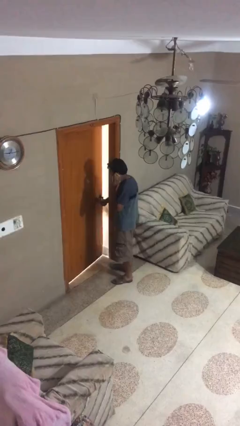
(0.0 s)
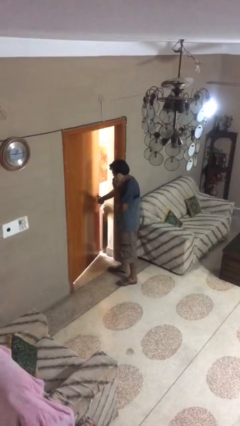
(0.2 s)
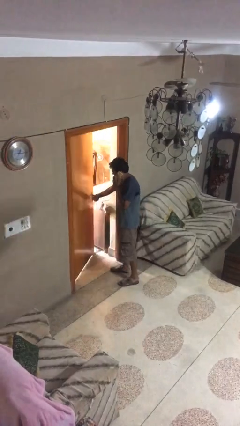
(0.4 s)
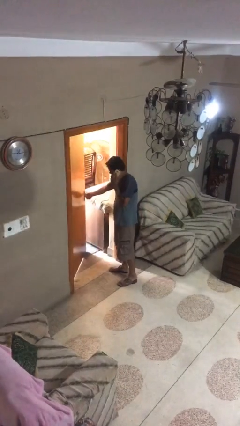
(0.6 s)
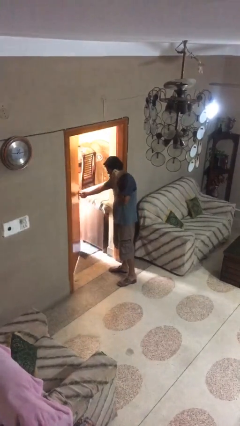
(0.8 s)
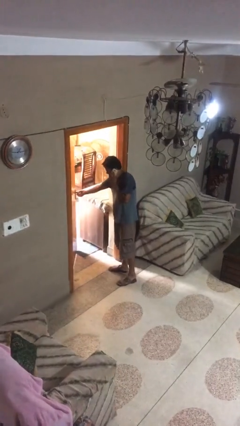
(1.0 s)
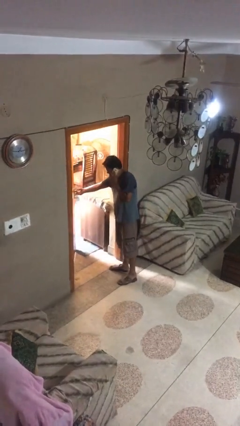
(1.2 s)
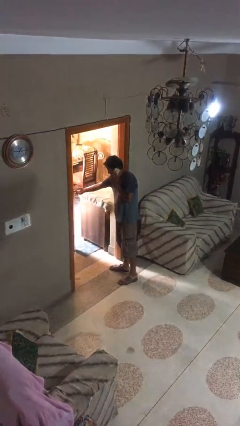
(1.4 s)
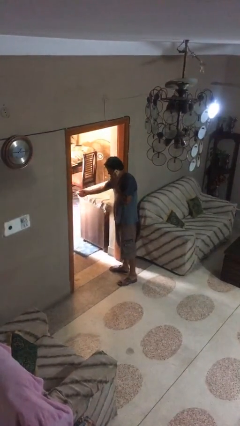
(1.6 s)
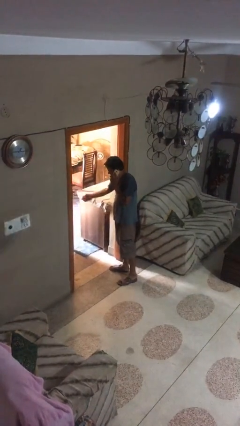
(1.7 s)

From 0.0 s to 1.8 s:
person opens facility door

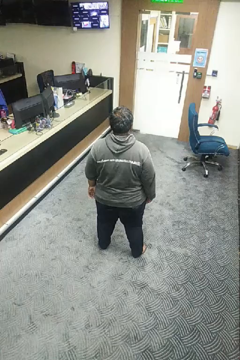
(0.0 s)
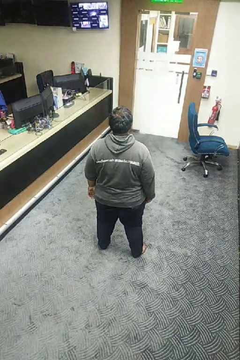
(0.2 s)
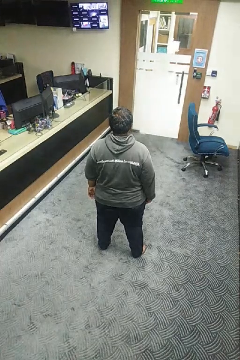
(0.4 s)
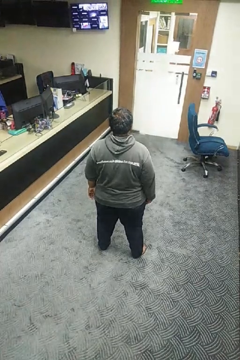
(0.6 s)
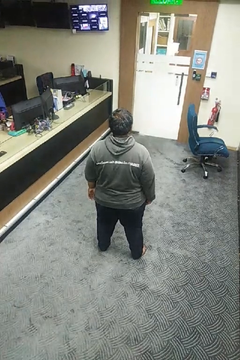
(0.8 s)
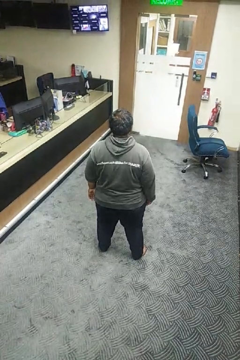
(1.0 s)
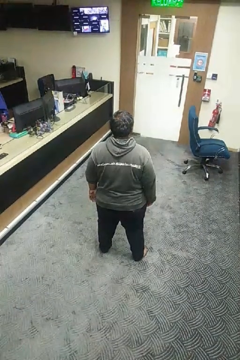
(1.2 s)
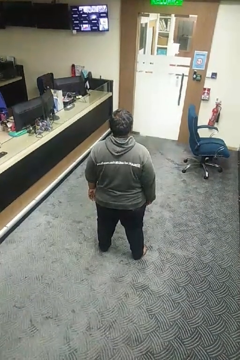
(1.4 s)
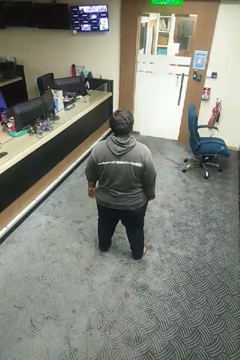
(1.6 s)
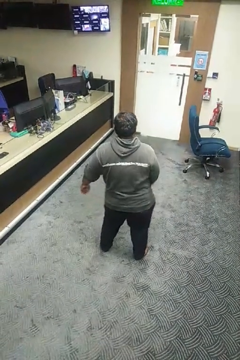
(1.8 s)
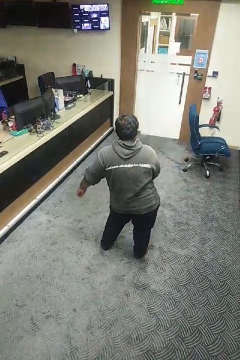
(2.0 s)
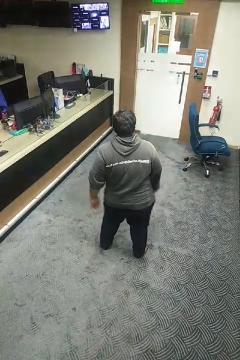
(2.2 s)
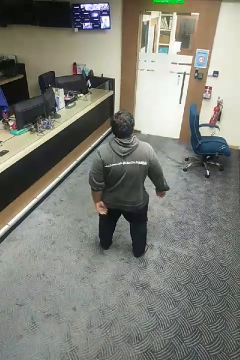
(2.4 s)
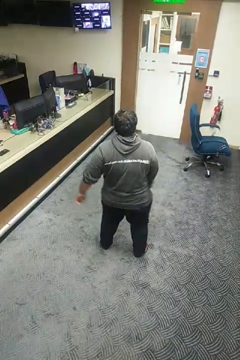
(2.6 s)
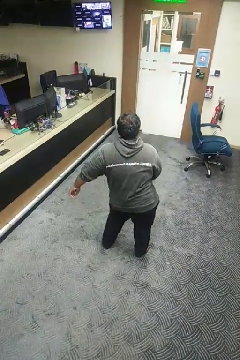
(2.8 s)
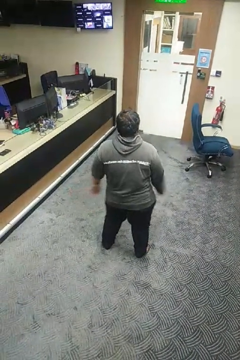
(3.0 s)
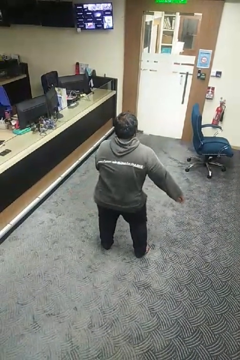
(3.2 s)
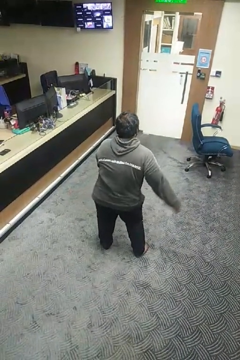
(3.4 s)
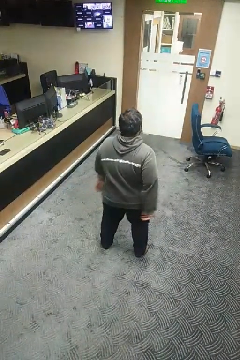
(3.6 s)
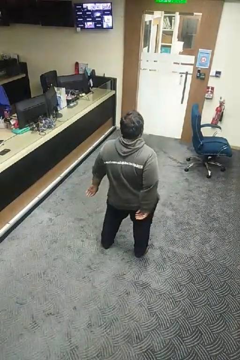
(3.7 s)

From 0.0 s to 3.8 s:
person dances in place

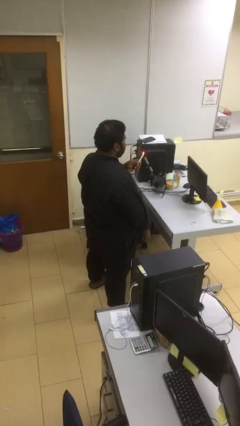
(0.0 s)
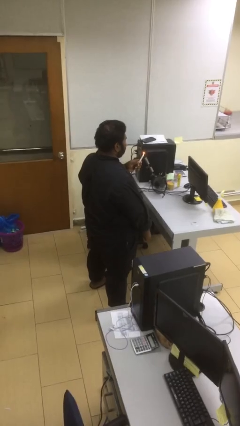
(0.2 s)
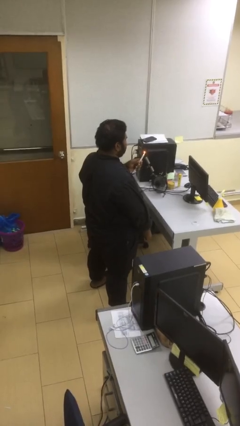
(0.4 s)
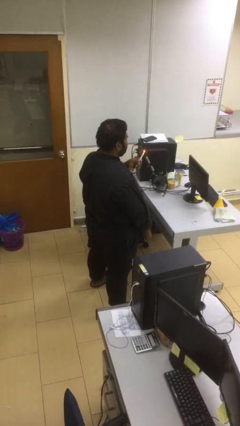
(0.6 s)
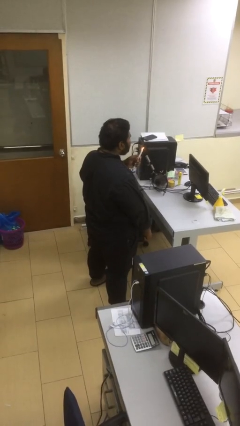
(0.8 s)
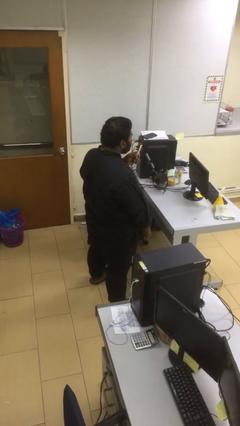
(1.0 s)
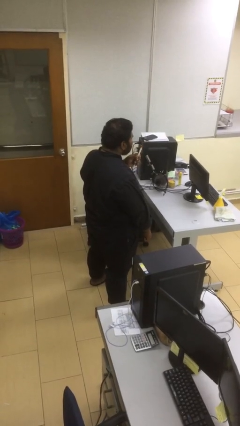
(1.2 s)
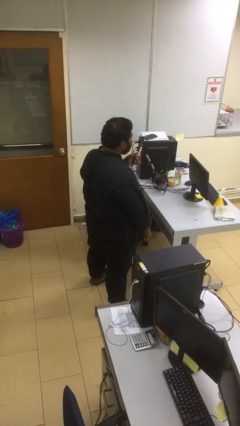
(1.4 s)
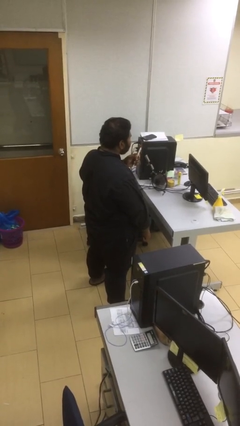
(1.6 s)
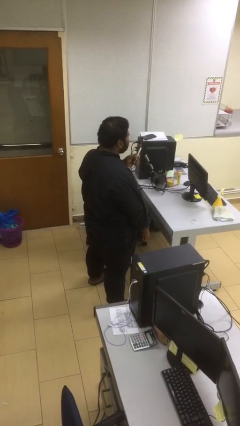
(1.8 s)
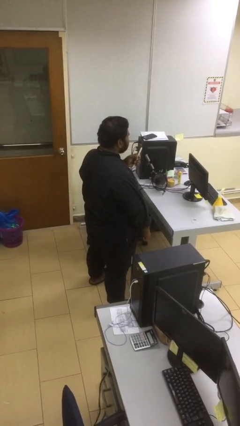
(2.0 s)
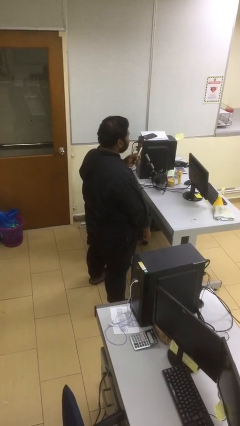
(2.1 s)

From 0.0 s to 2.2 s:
person extinguishes candle

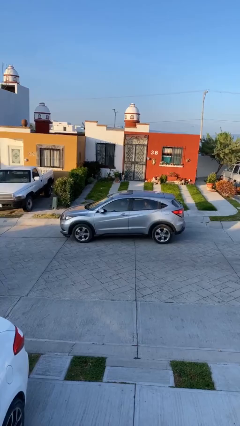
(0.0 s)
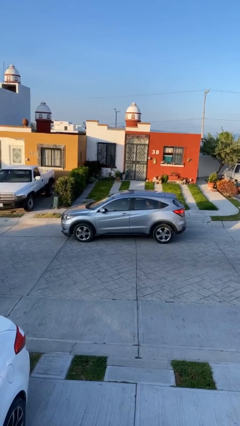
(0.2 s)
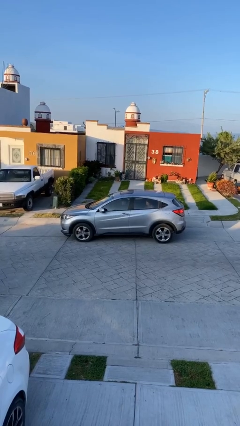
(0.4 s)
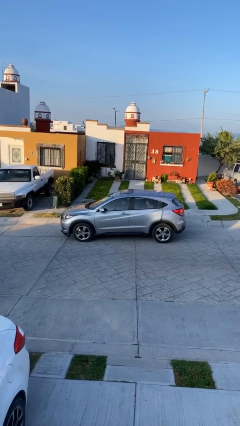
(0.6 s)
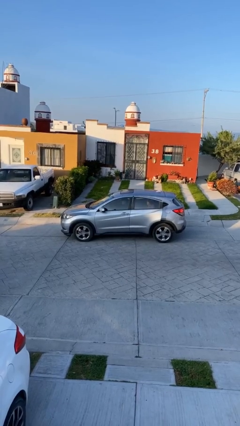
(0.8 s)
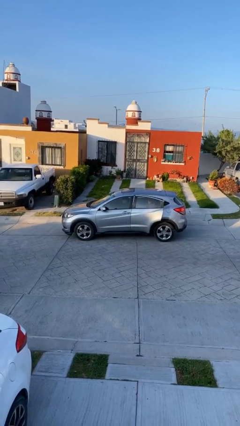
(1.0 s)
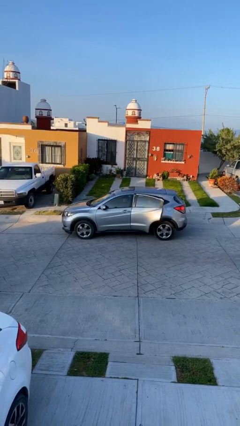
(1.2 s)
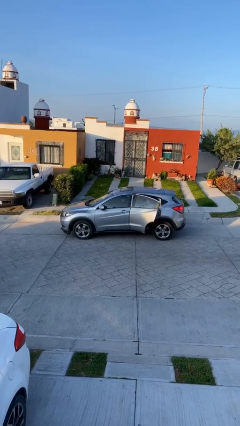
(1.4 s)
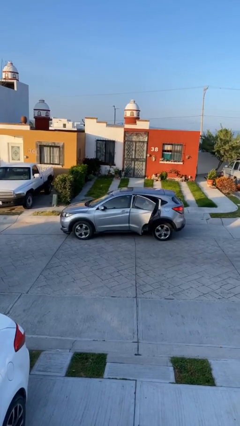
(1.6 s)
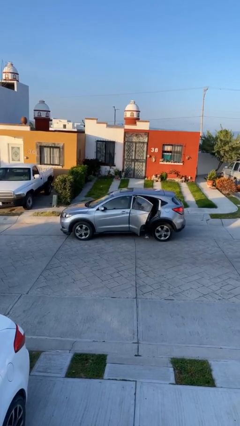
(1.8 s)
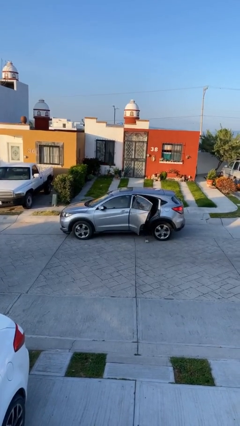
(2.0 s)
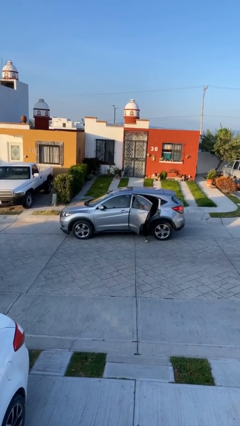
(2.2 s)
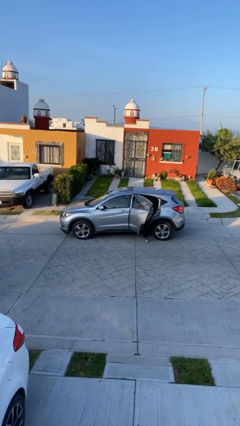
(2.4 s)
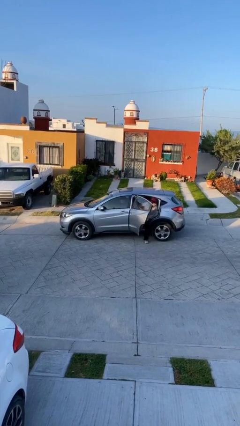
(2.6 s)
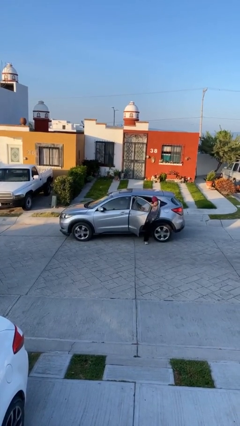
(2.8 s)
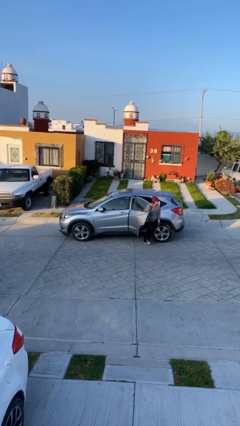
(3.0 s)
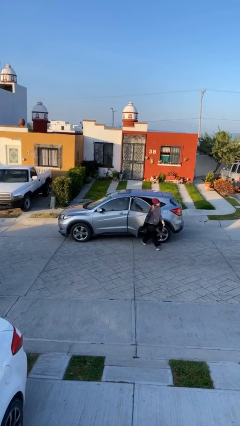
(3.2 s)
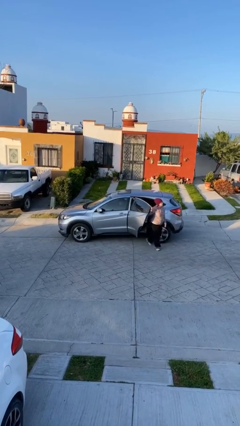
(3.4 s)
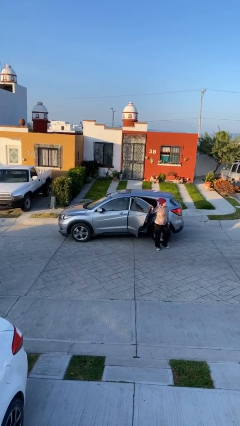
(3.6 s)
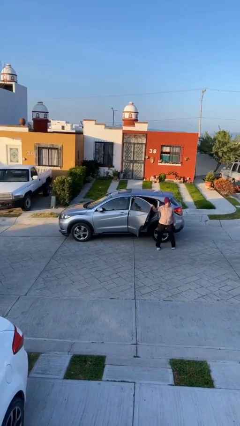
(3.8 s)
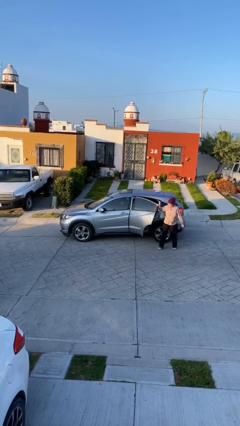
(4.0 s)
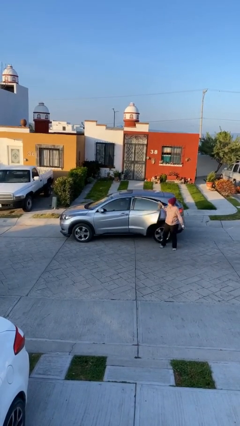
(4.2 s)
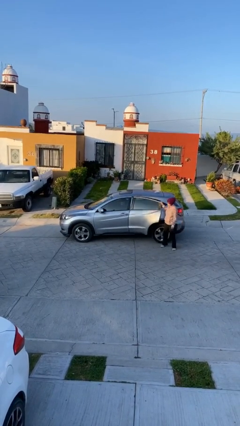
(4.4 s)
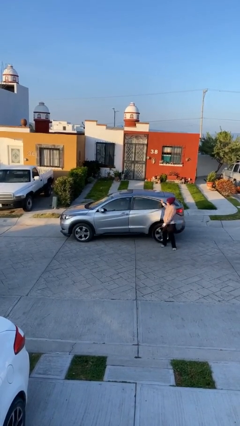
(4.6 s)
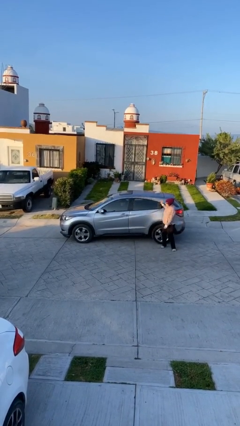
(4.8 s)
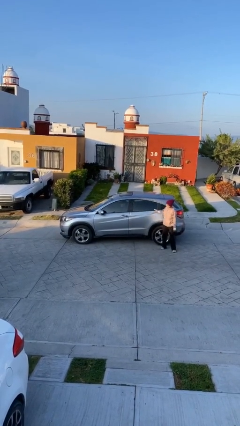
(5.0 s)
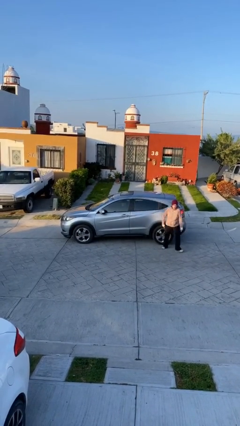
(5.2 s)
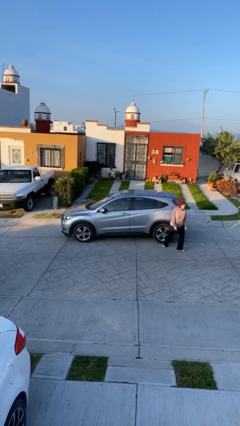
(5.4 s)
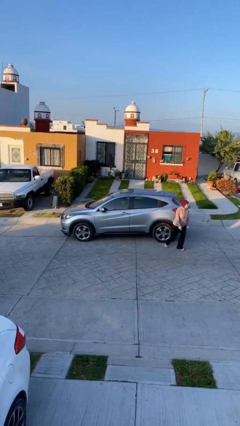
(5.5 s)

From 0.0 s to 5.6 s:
car drops off person

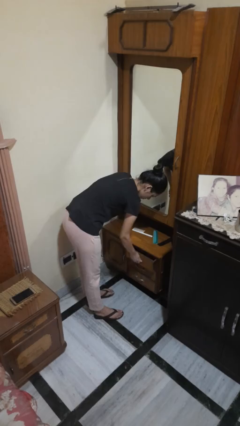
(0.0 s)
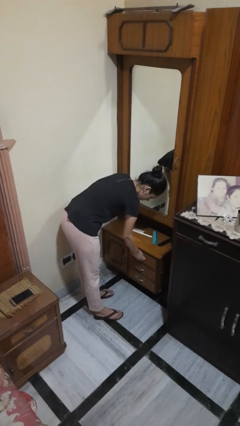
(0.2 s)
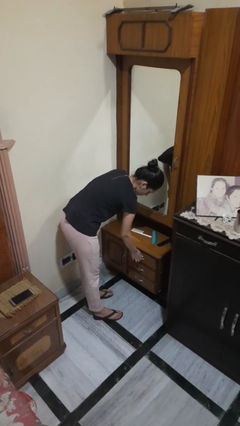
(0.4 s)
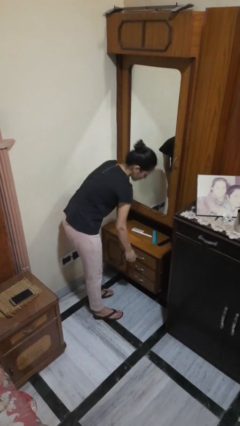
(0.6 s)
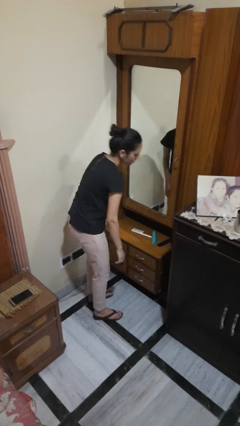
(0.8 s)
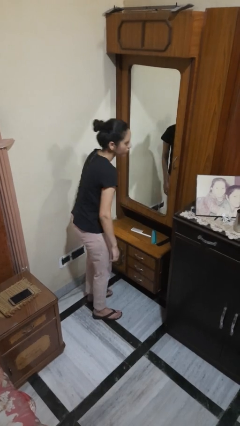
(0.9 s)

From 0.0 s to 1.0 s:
person closes dresser drawer

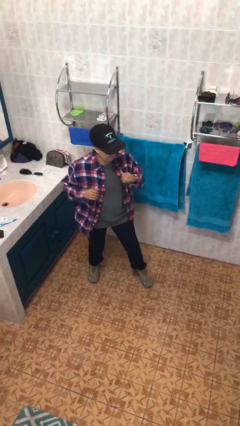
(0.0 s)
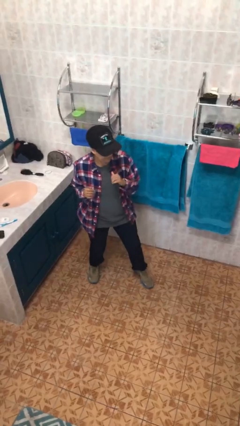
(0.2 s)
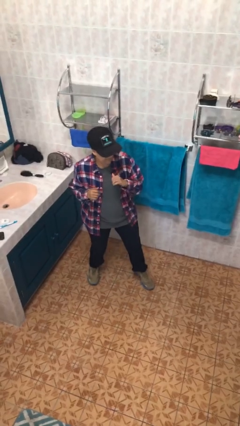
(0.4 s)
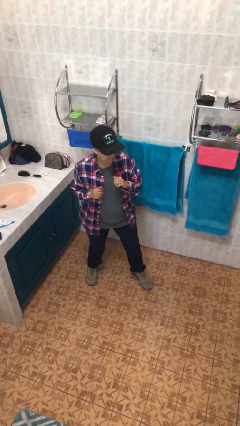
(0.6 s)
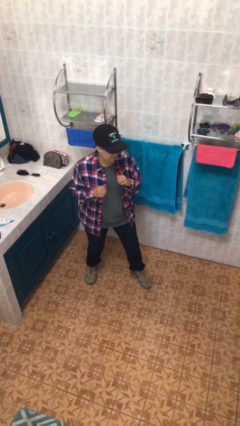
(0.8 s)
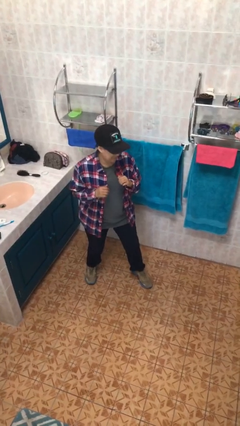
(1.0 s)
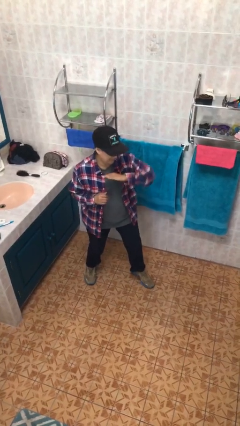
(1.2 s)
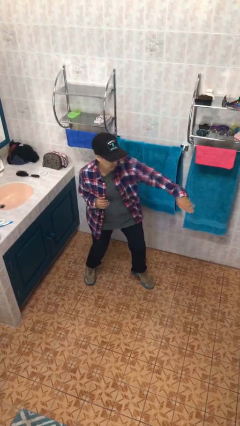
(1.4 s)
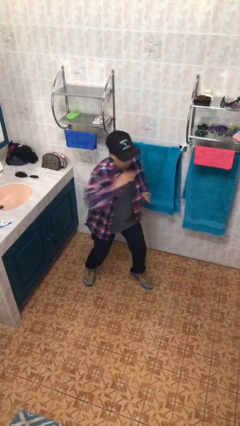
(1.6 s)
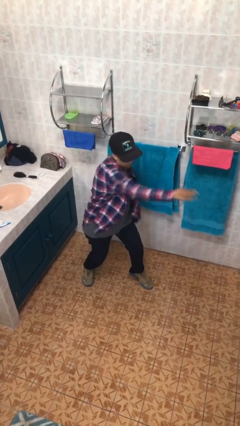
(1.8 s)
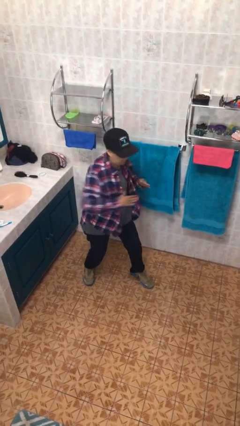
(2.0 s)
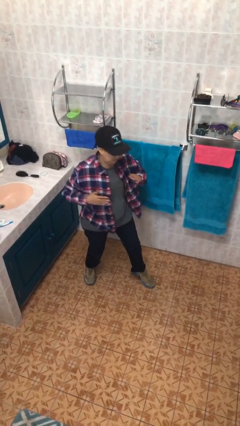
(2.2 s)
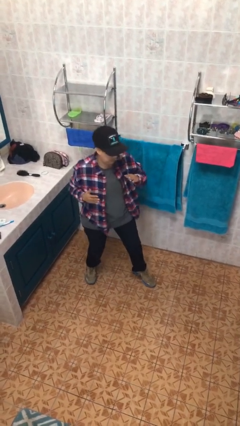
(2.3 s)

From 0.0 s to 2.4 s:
person karate chop

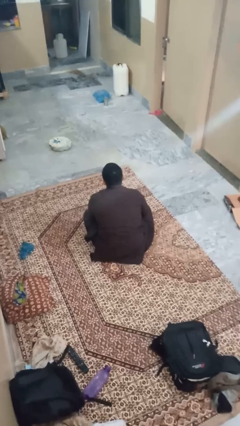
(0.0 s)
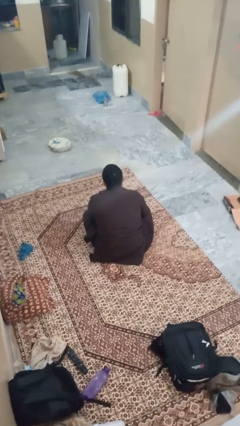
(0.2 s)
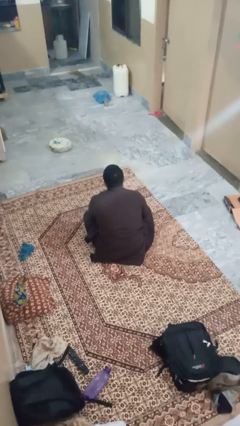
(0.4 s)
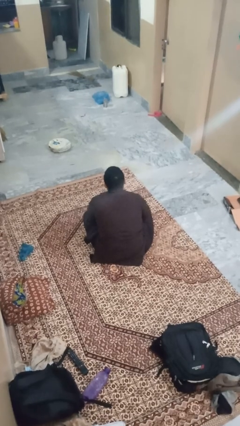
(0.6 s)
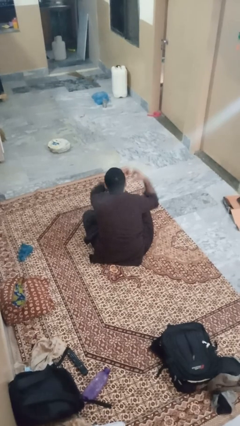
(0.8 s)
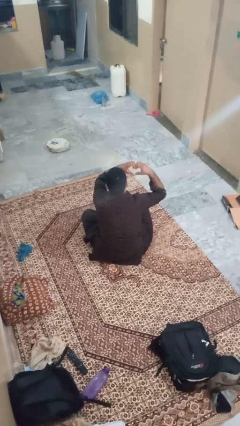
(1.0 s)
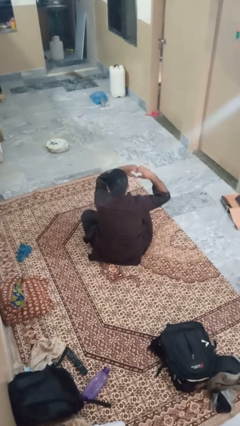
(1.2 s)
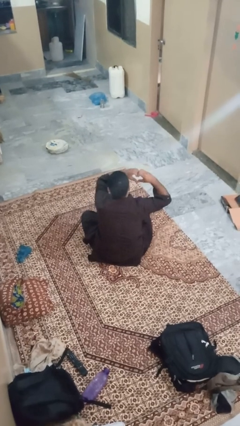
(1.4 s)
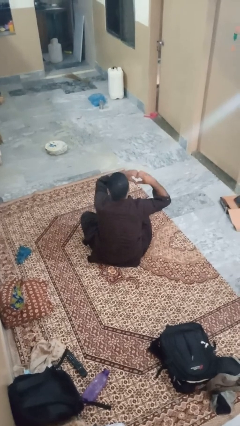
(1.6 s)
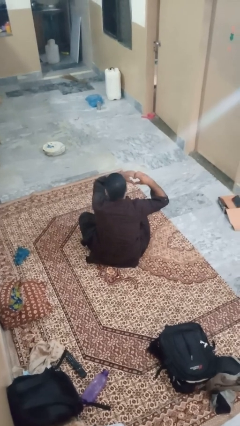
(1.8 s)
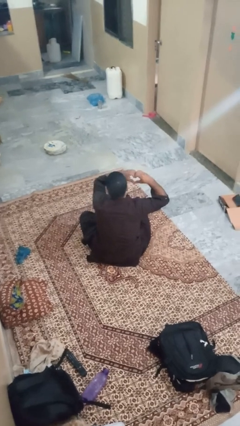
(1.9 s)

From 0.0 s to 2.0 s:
person gestures heart
